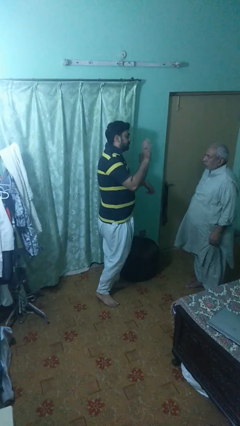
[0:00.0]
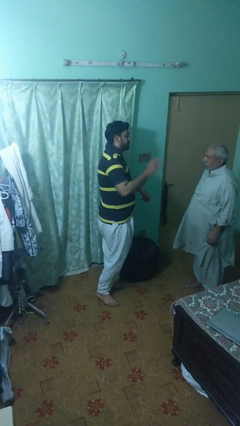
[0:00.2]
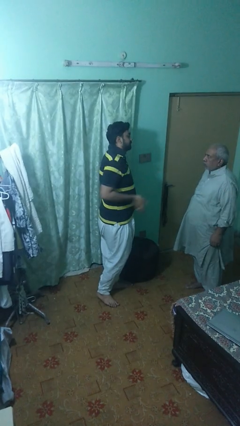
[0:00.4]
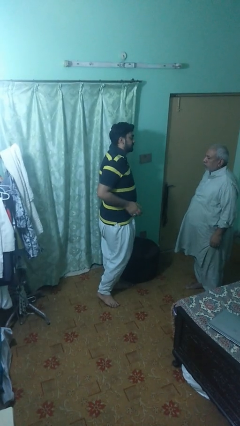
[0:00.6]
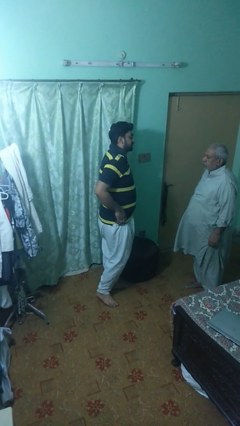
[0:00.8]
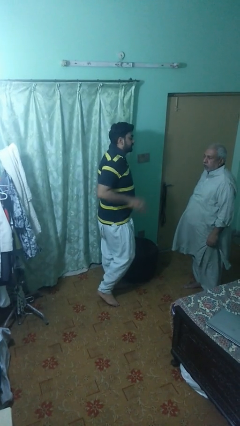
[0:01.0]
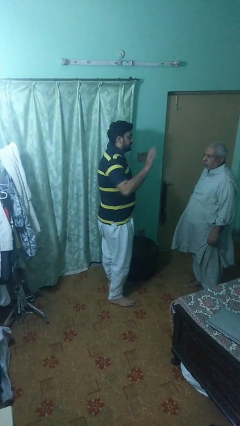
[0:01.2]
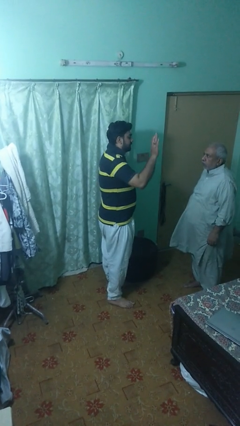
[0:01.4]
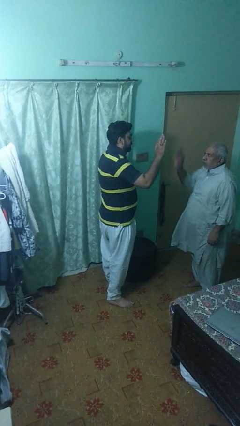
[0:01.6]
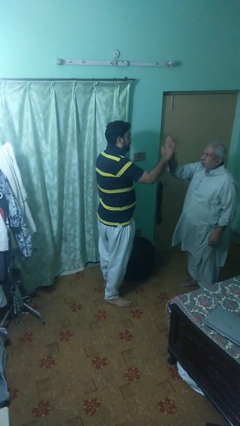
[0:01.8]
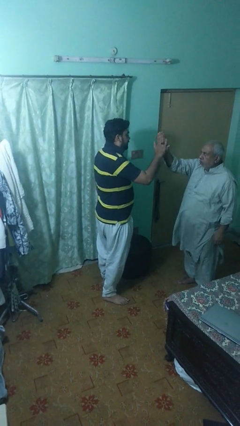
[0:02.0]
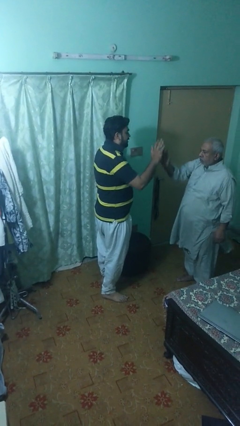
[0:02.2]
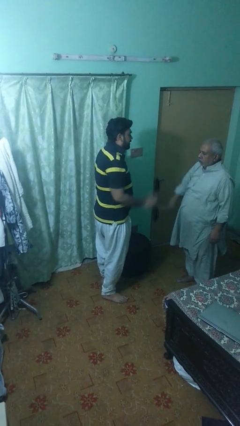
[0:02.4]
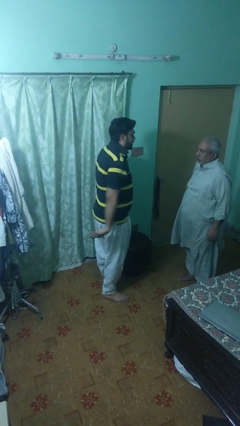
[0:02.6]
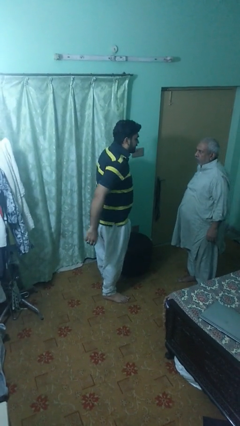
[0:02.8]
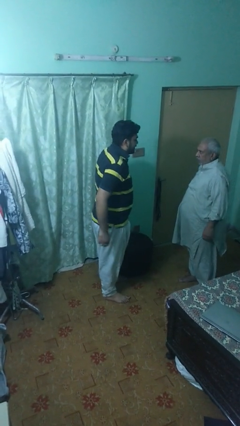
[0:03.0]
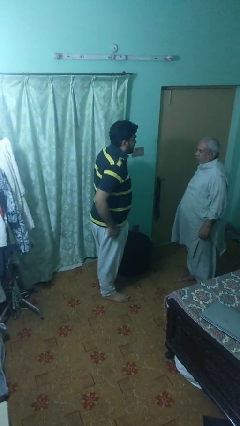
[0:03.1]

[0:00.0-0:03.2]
person highfives hand

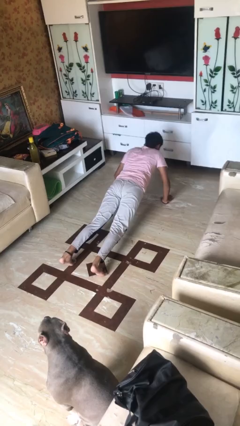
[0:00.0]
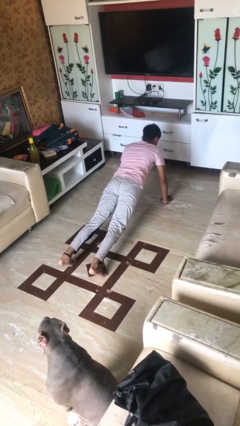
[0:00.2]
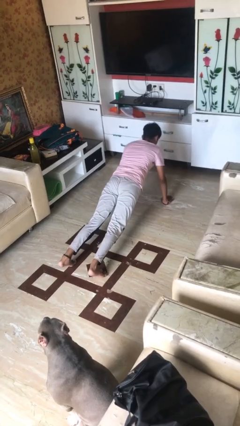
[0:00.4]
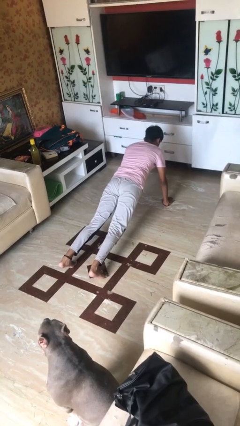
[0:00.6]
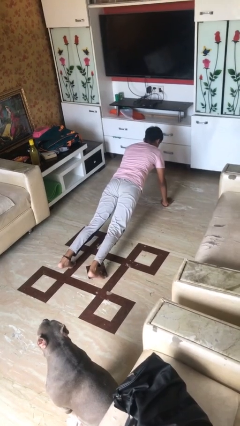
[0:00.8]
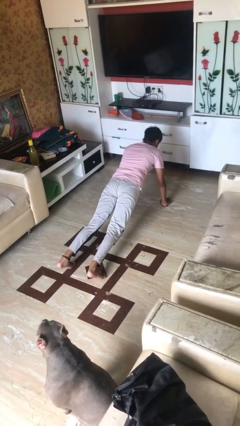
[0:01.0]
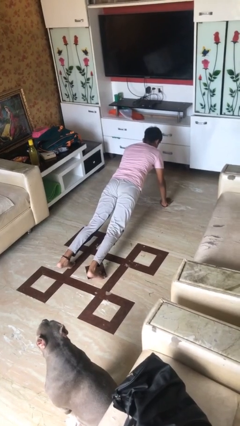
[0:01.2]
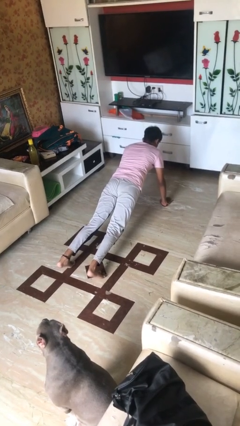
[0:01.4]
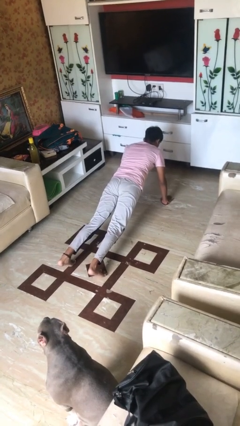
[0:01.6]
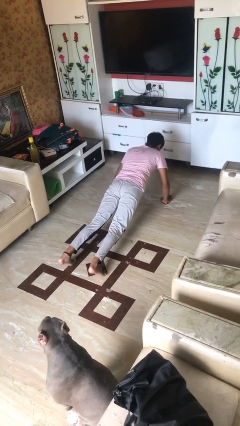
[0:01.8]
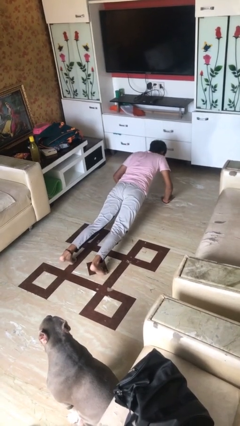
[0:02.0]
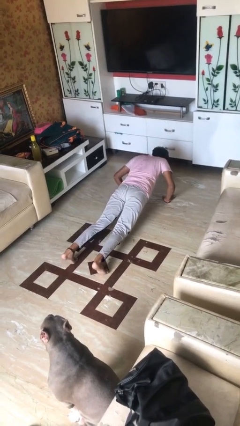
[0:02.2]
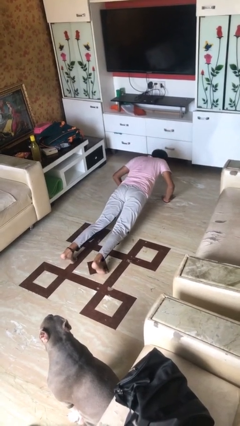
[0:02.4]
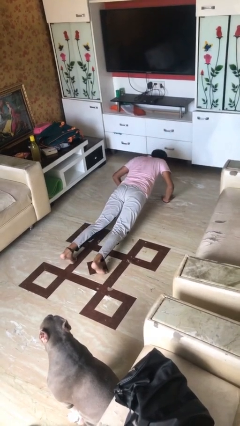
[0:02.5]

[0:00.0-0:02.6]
person exercises with pushup

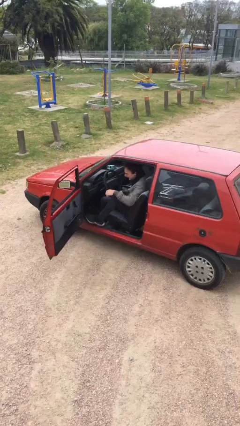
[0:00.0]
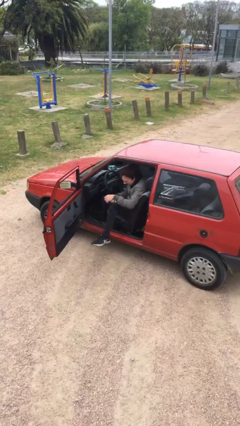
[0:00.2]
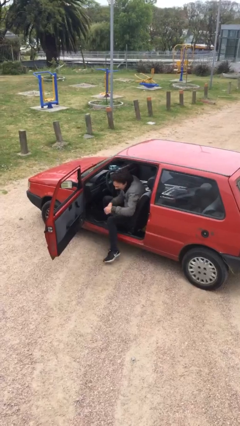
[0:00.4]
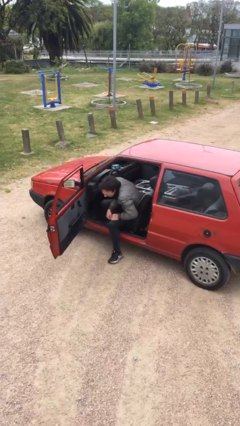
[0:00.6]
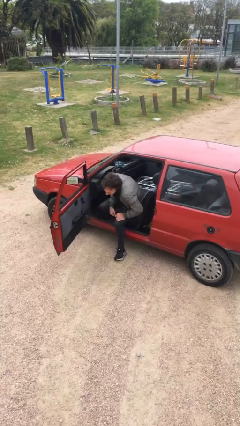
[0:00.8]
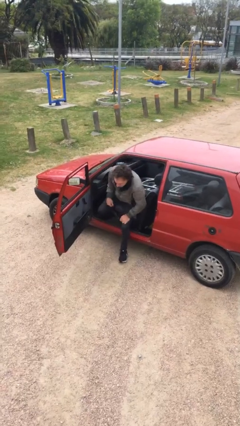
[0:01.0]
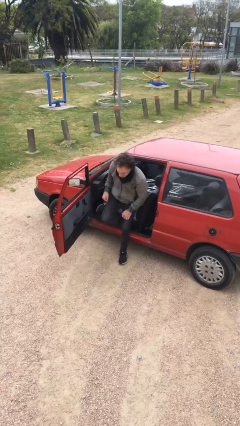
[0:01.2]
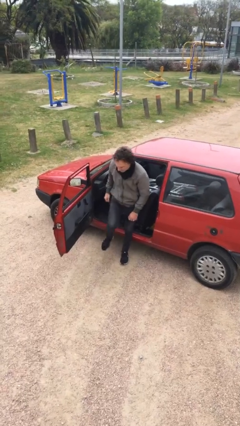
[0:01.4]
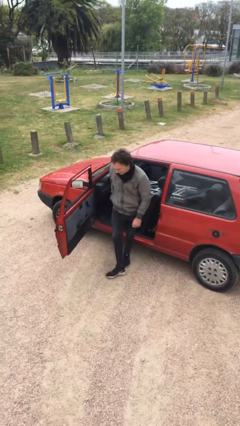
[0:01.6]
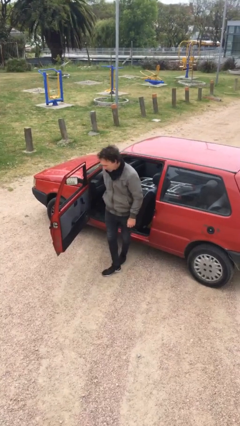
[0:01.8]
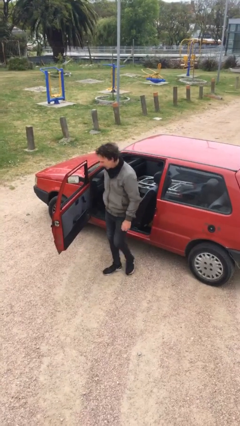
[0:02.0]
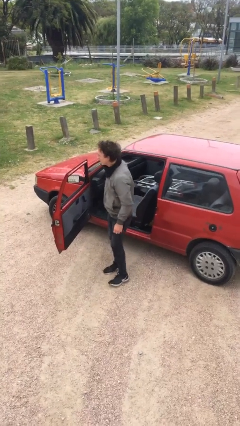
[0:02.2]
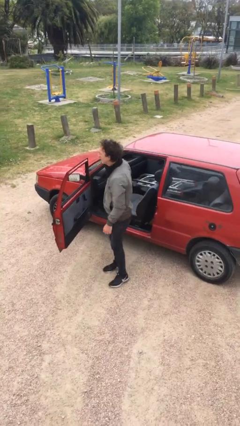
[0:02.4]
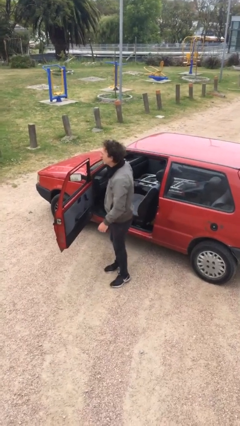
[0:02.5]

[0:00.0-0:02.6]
person exits car

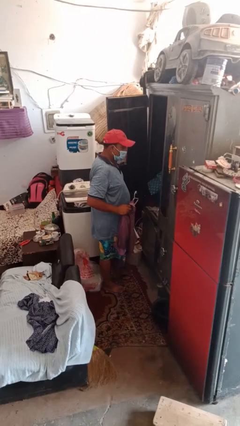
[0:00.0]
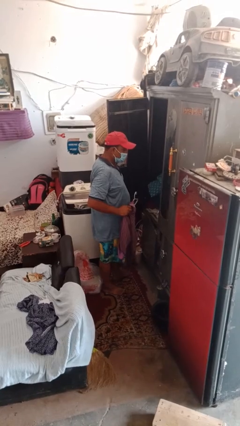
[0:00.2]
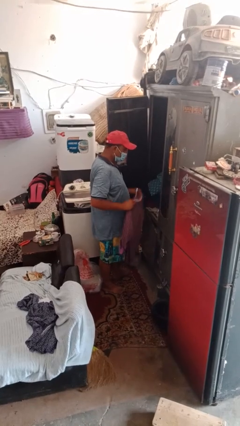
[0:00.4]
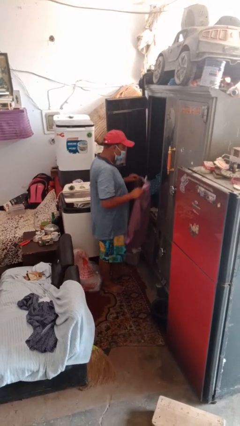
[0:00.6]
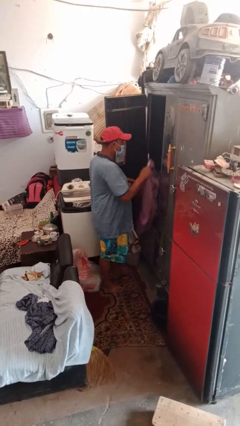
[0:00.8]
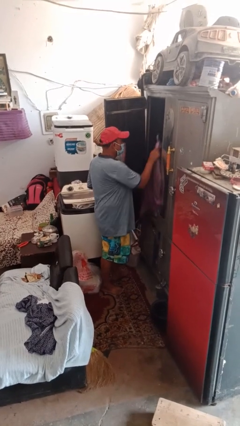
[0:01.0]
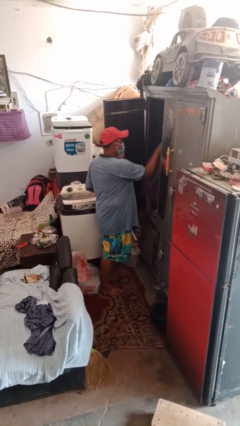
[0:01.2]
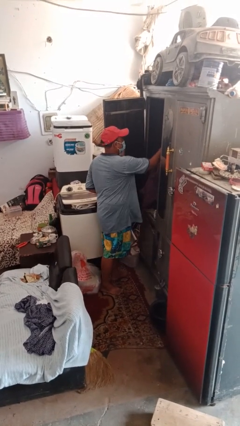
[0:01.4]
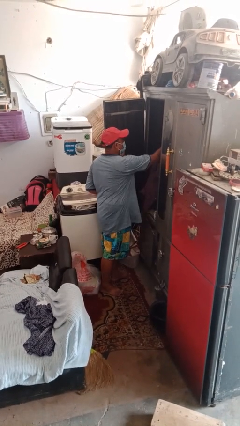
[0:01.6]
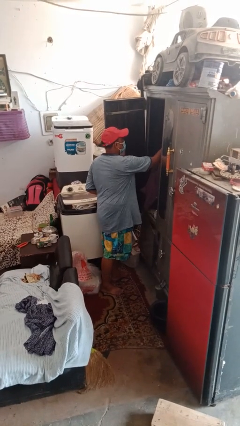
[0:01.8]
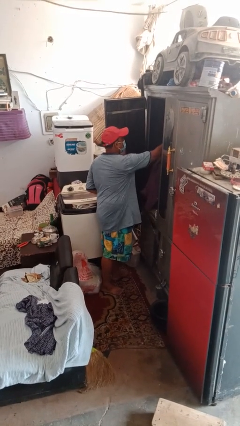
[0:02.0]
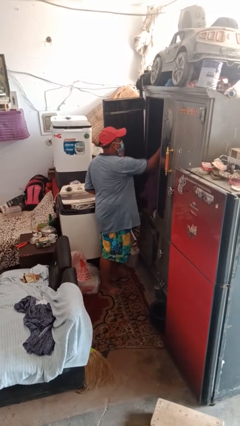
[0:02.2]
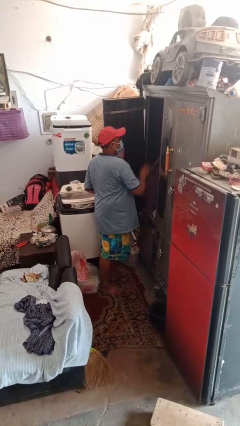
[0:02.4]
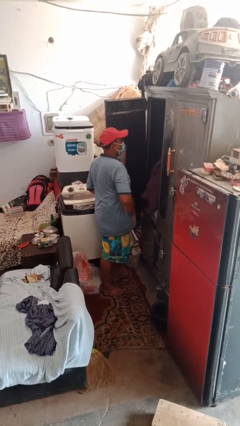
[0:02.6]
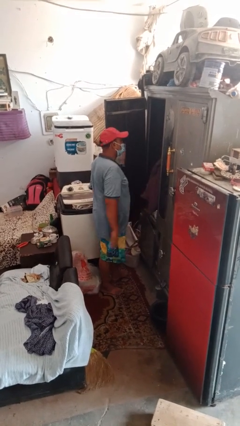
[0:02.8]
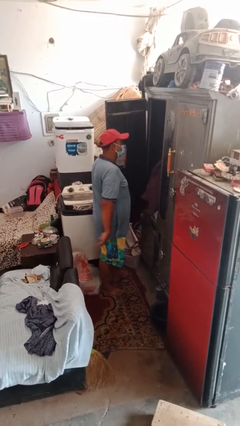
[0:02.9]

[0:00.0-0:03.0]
person puts clothes into closet

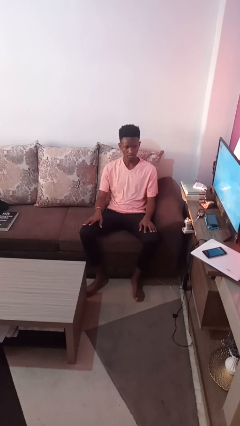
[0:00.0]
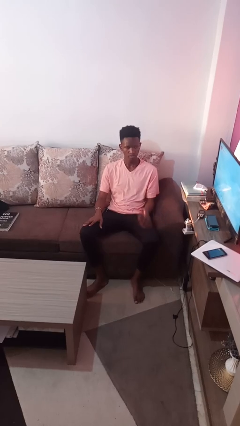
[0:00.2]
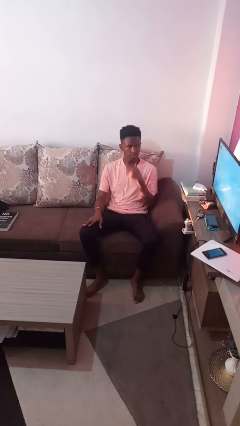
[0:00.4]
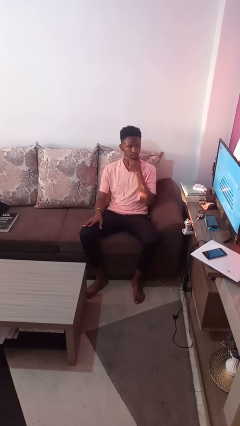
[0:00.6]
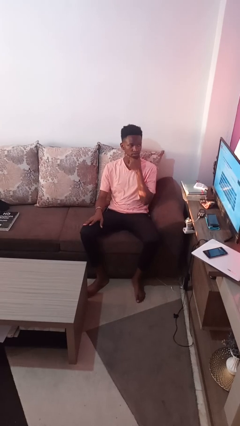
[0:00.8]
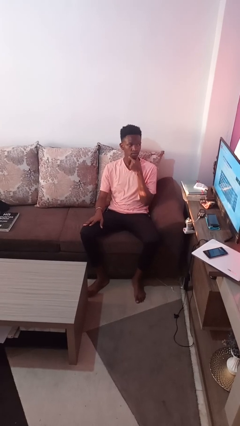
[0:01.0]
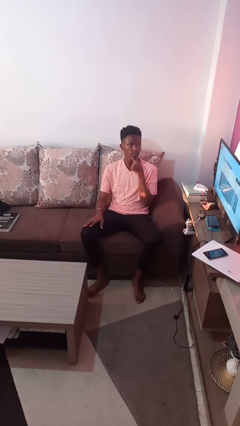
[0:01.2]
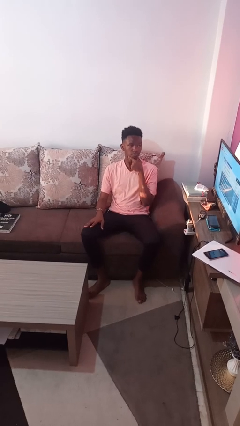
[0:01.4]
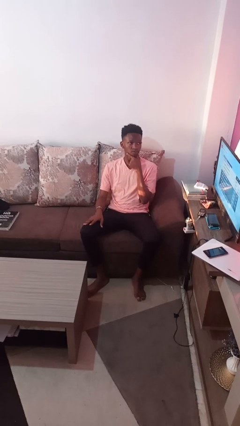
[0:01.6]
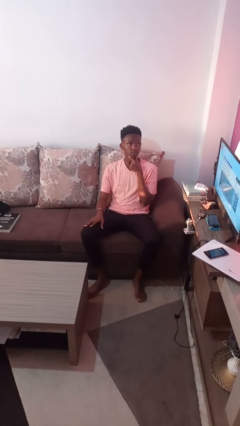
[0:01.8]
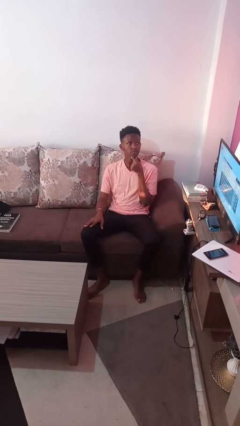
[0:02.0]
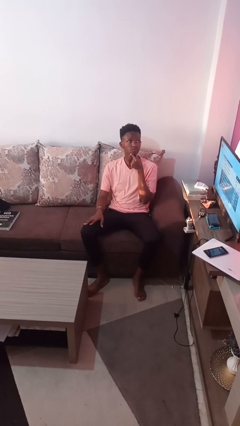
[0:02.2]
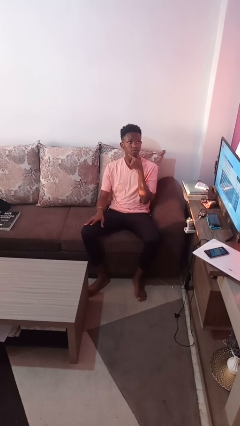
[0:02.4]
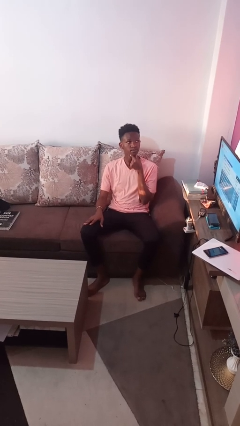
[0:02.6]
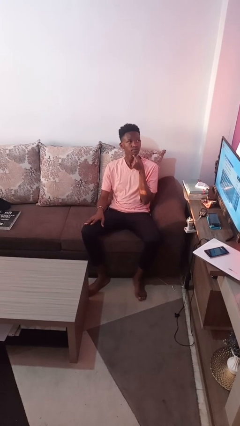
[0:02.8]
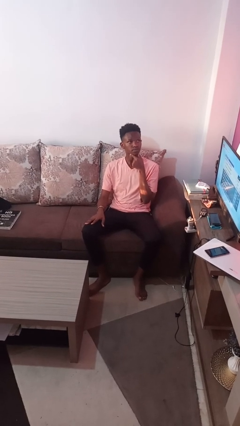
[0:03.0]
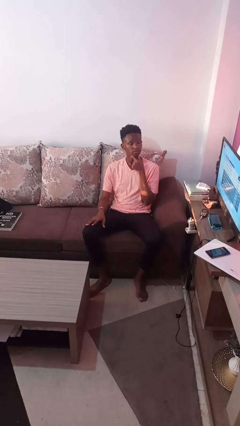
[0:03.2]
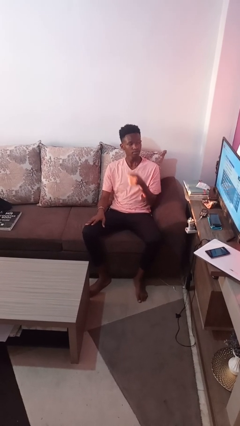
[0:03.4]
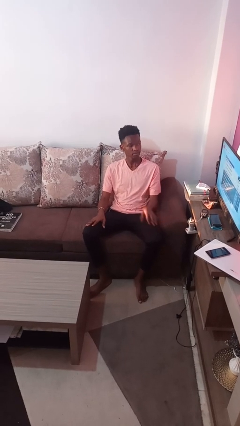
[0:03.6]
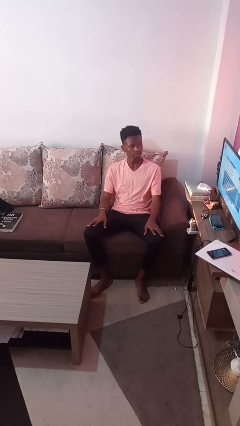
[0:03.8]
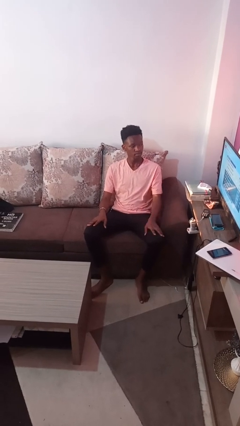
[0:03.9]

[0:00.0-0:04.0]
person strokes chin

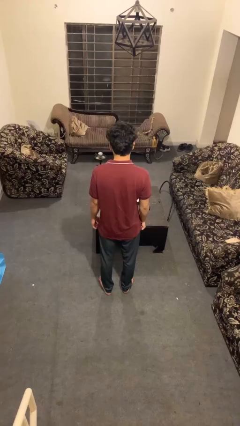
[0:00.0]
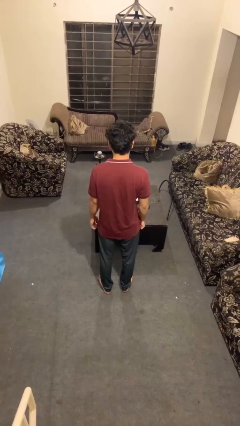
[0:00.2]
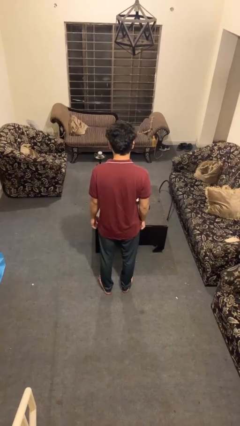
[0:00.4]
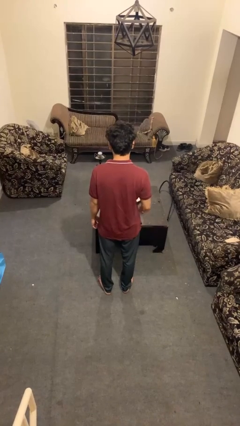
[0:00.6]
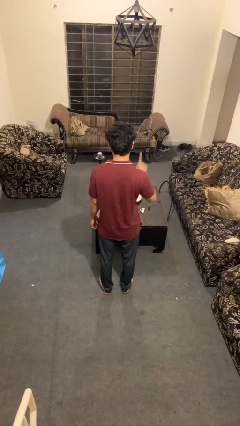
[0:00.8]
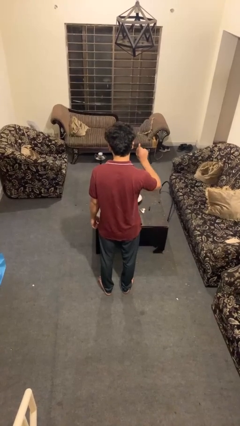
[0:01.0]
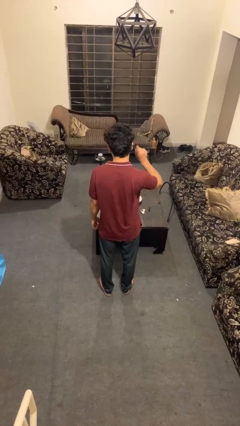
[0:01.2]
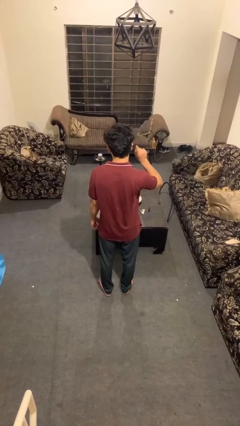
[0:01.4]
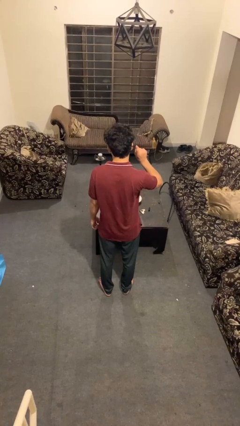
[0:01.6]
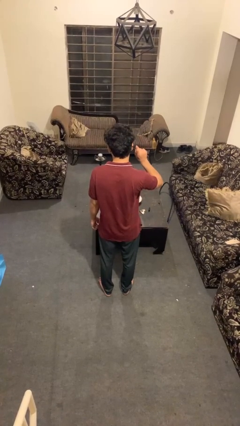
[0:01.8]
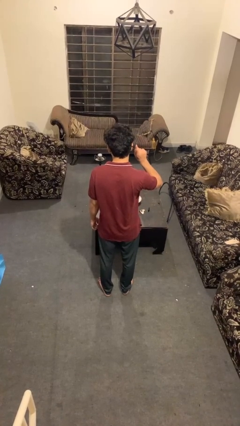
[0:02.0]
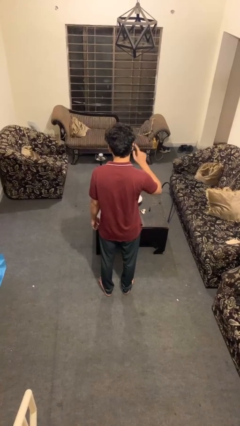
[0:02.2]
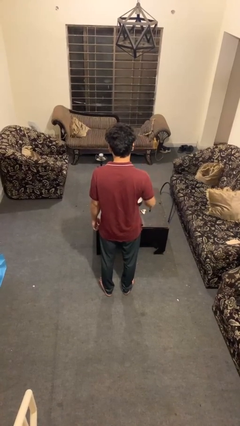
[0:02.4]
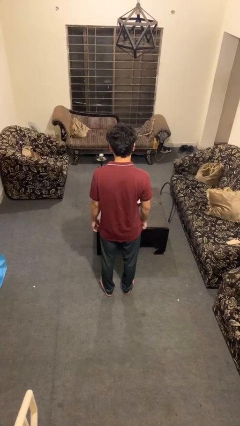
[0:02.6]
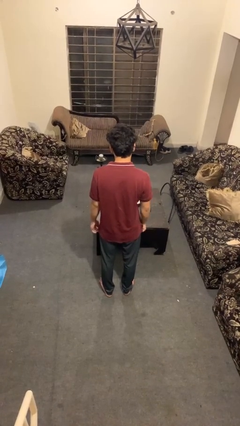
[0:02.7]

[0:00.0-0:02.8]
person gestures number one
